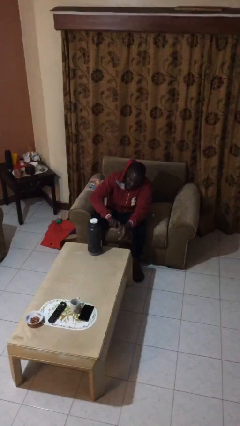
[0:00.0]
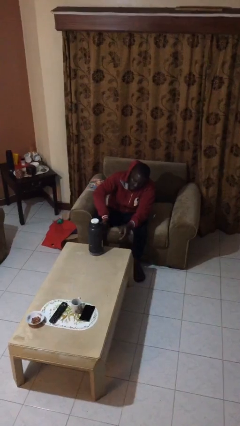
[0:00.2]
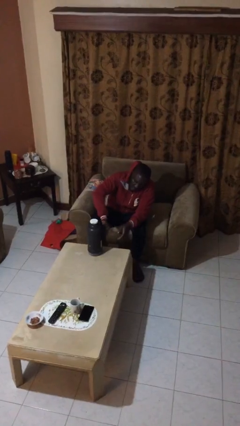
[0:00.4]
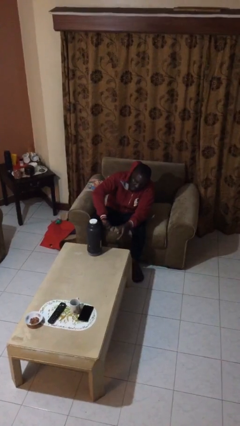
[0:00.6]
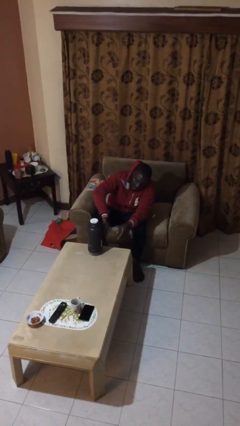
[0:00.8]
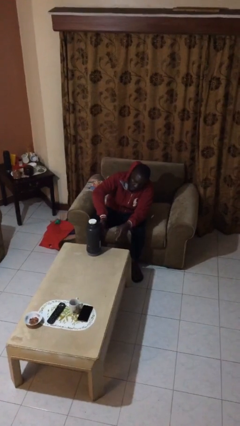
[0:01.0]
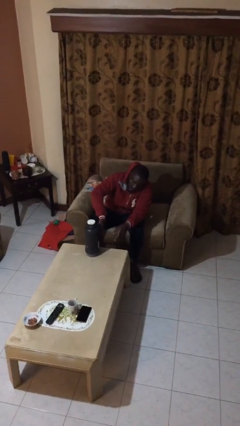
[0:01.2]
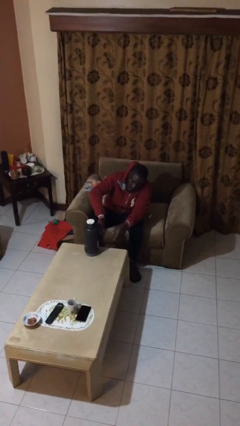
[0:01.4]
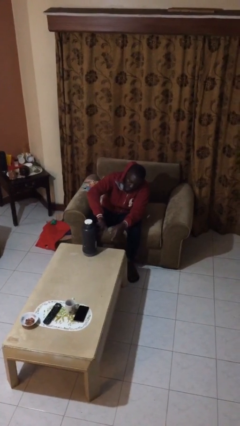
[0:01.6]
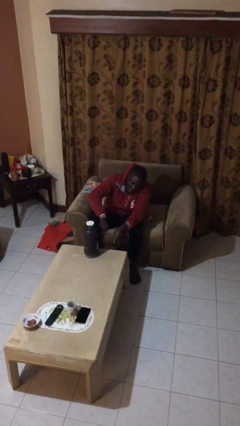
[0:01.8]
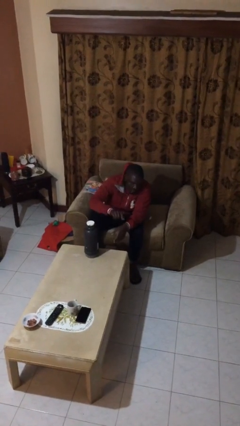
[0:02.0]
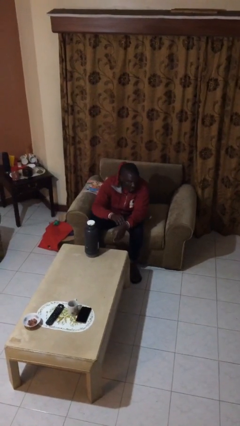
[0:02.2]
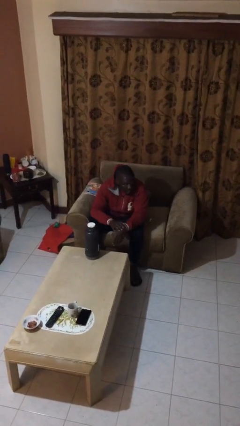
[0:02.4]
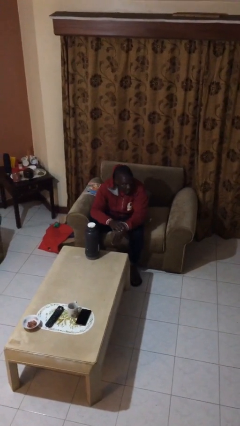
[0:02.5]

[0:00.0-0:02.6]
person taps object with finger

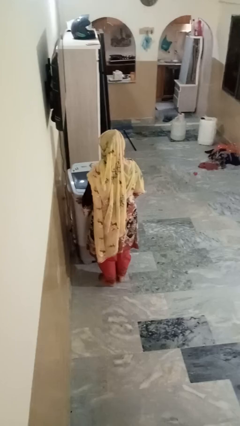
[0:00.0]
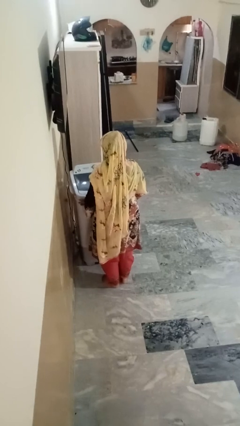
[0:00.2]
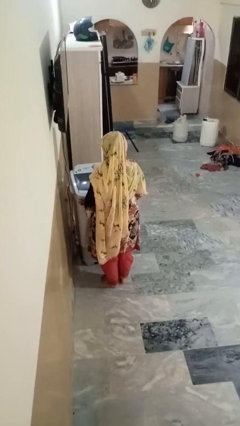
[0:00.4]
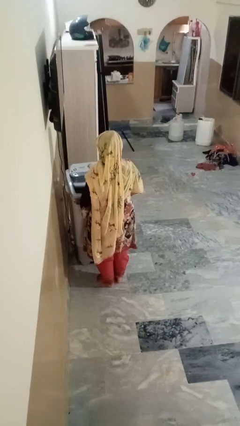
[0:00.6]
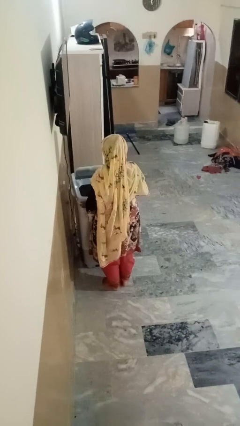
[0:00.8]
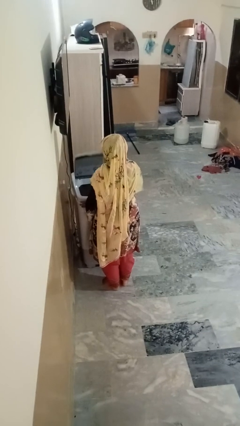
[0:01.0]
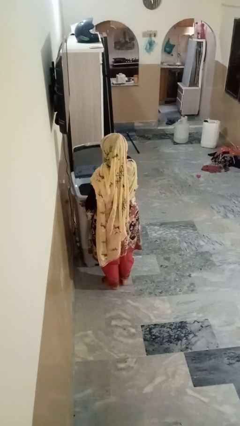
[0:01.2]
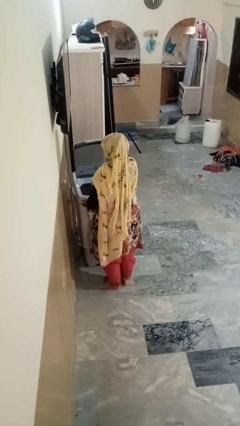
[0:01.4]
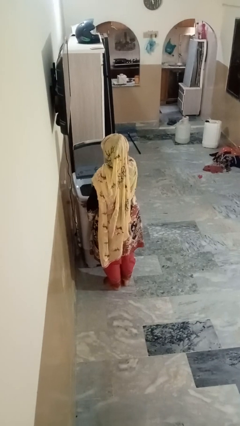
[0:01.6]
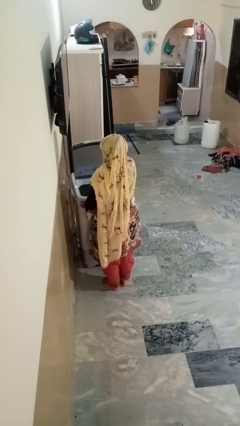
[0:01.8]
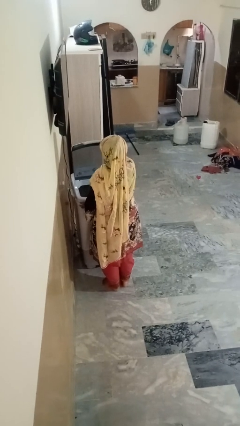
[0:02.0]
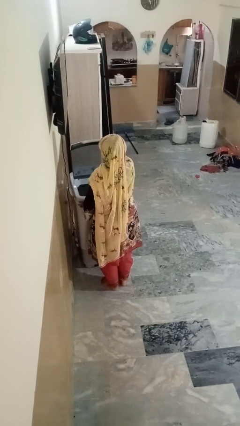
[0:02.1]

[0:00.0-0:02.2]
person opens clothes washer

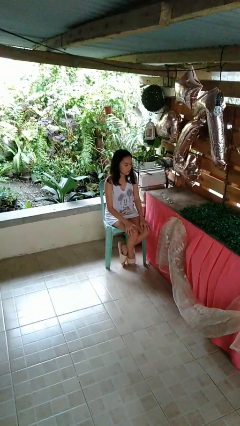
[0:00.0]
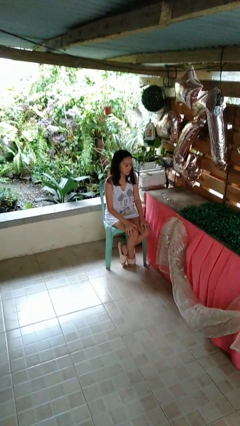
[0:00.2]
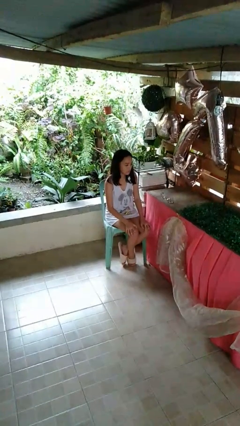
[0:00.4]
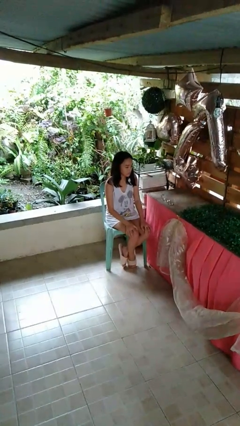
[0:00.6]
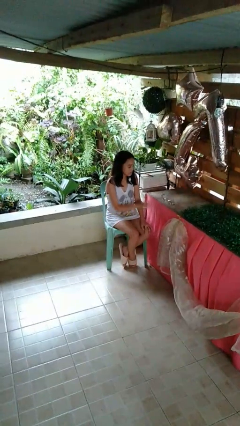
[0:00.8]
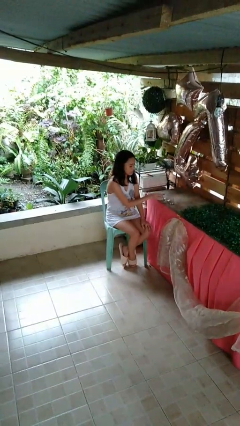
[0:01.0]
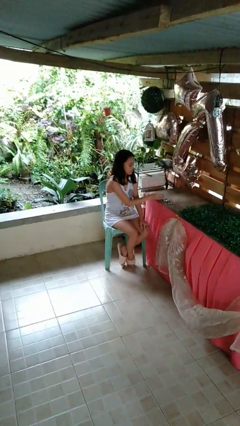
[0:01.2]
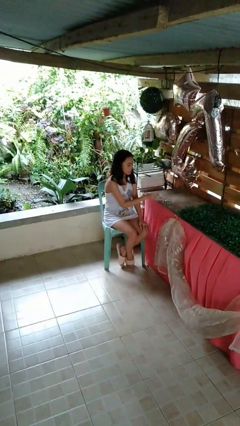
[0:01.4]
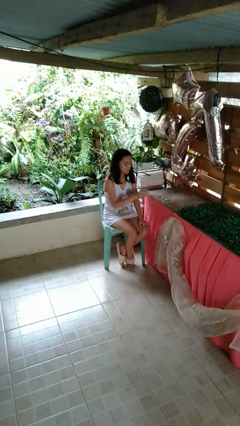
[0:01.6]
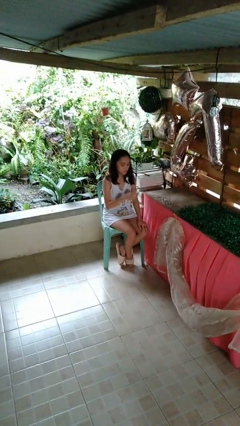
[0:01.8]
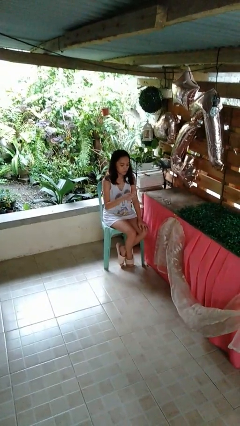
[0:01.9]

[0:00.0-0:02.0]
person picks up object from table

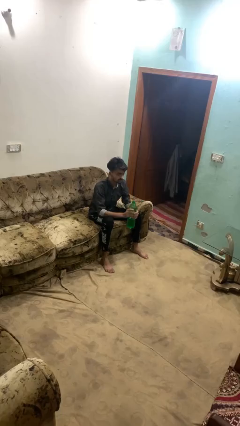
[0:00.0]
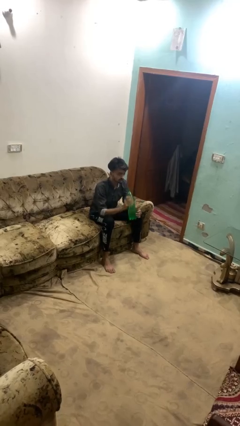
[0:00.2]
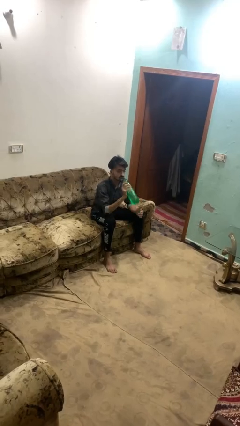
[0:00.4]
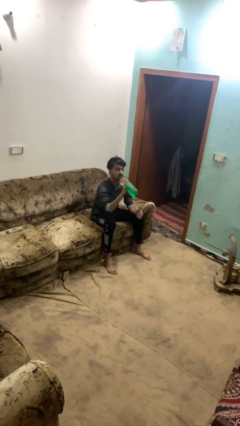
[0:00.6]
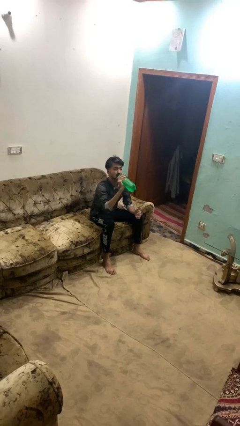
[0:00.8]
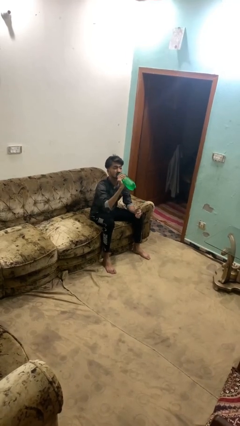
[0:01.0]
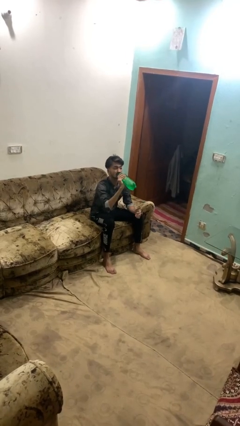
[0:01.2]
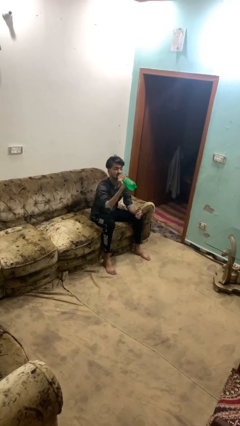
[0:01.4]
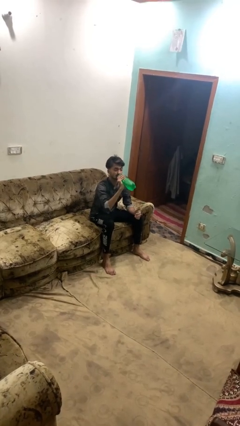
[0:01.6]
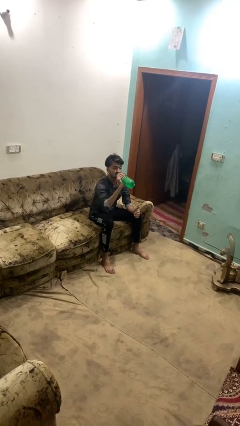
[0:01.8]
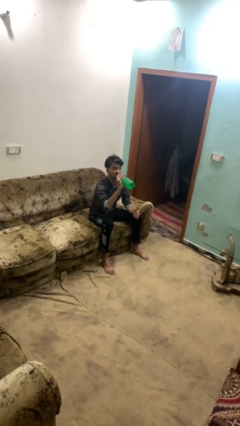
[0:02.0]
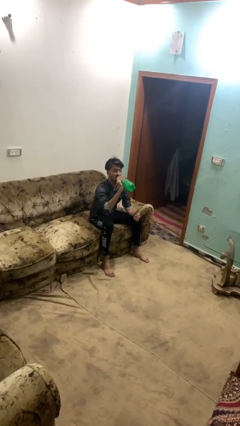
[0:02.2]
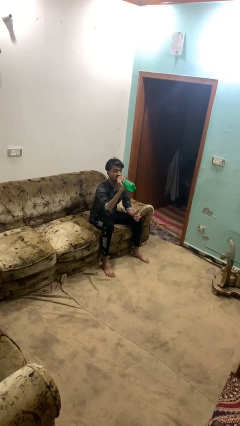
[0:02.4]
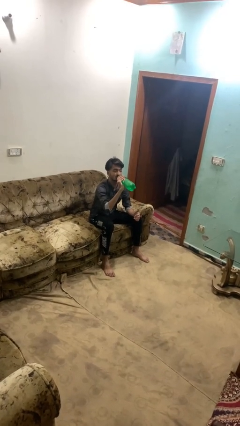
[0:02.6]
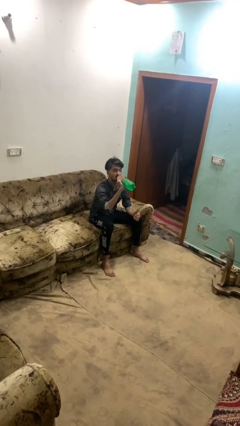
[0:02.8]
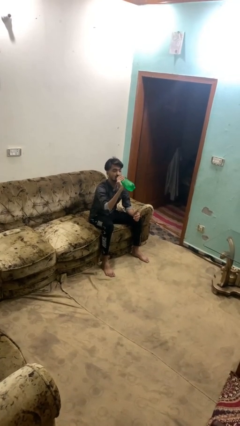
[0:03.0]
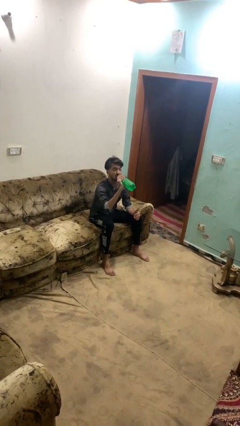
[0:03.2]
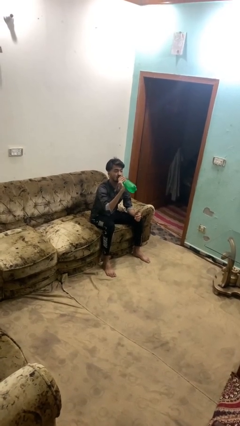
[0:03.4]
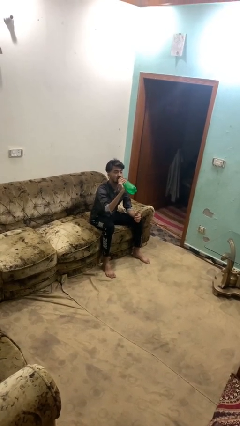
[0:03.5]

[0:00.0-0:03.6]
person drinks from bottle

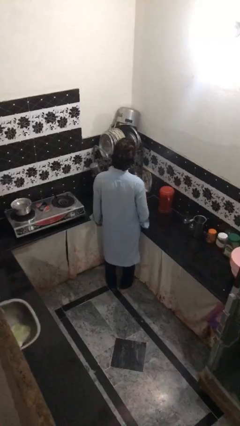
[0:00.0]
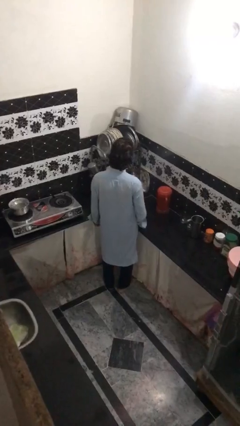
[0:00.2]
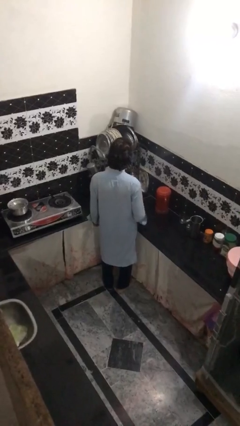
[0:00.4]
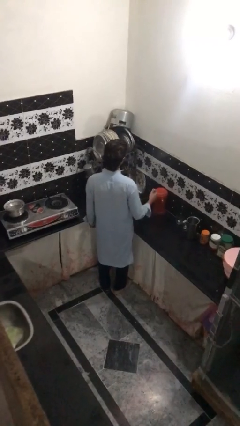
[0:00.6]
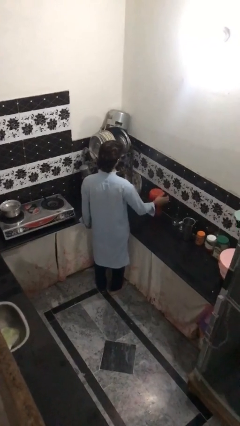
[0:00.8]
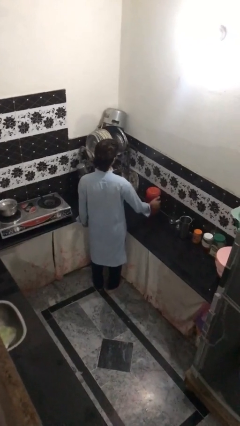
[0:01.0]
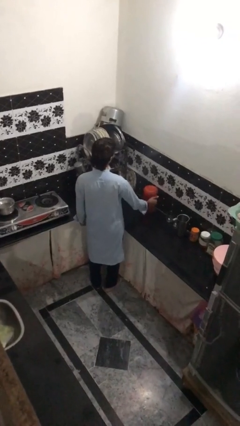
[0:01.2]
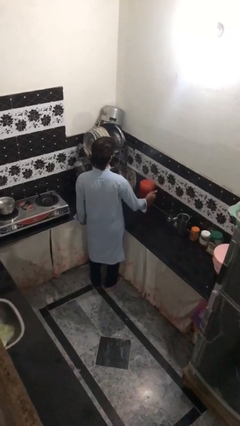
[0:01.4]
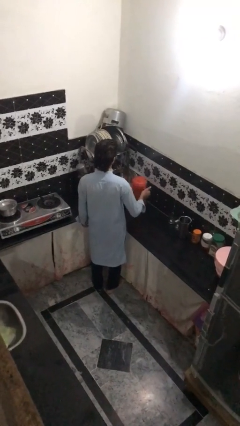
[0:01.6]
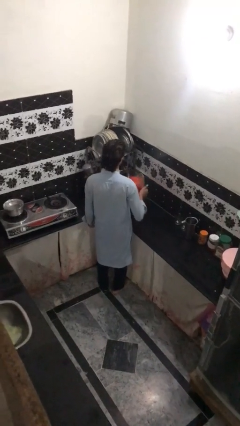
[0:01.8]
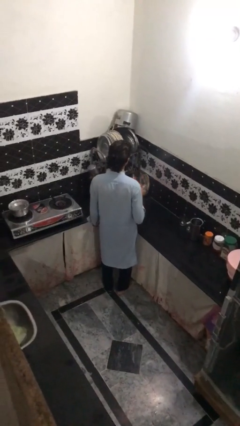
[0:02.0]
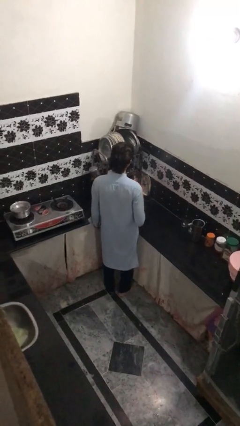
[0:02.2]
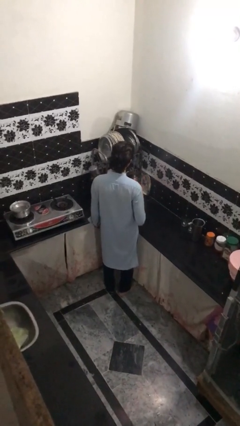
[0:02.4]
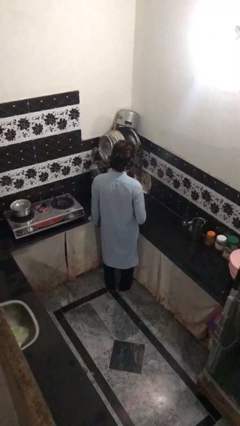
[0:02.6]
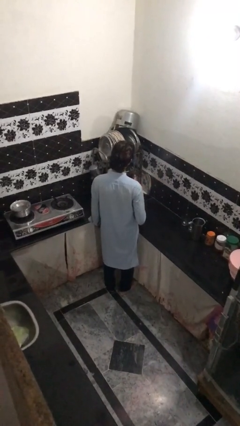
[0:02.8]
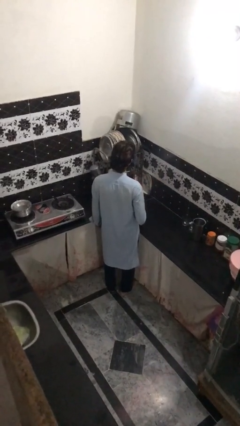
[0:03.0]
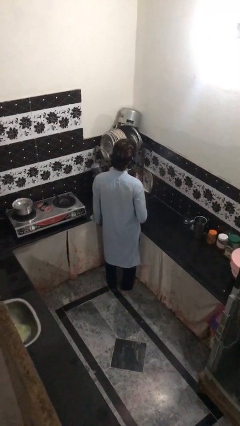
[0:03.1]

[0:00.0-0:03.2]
person picks up object from countertop

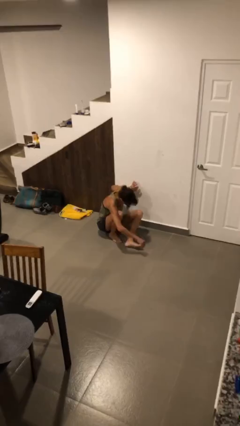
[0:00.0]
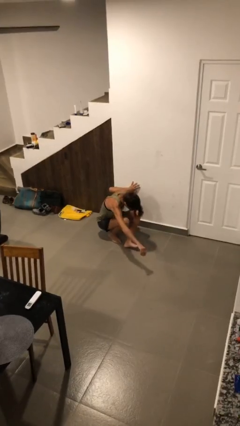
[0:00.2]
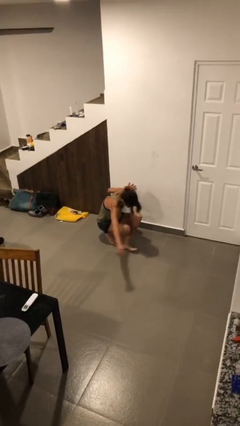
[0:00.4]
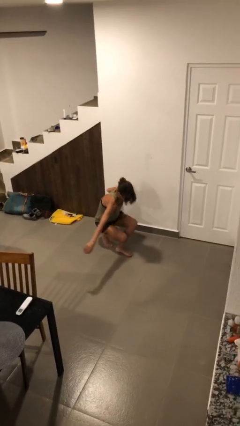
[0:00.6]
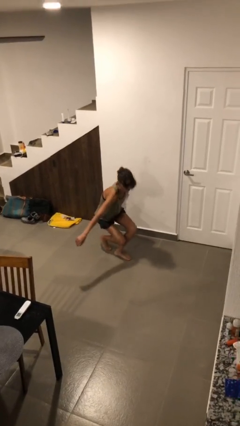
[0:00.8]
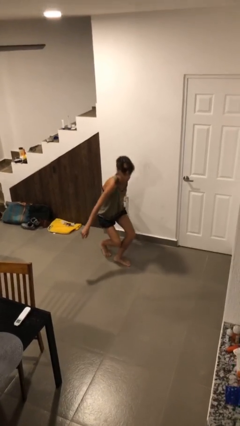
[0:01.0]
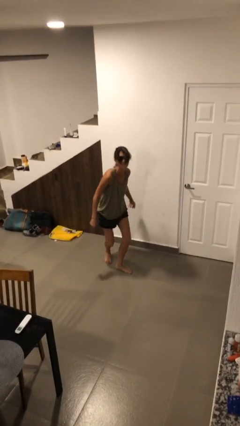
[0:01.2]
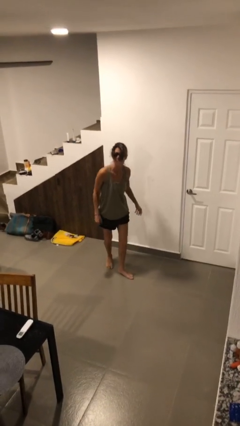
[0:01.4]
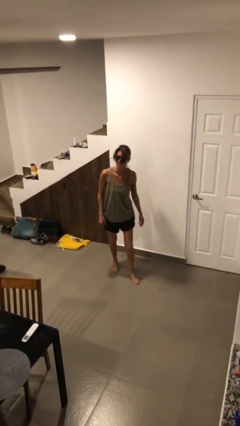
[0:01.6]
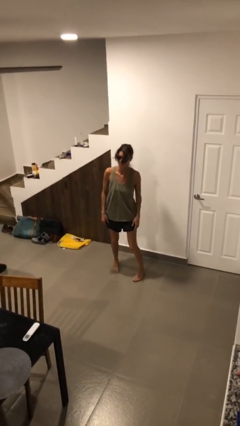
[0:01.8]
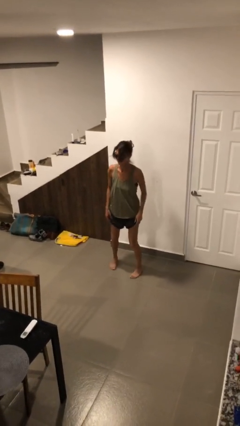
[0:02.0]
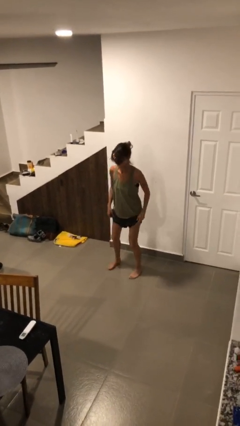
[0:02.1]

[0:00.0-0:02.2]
person stands up

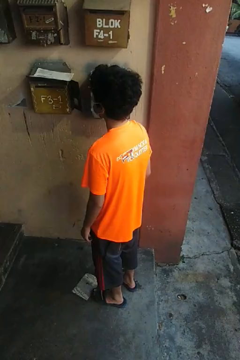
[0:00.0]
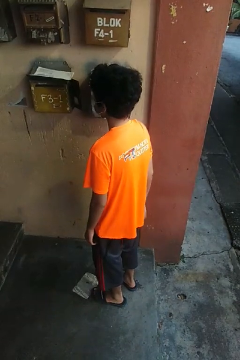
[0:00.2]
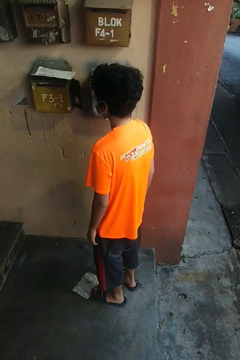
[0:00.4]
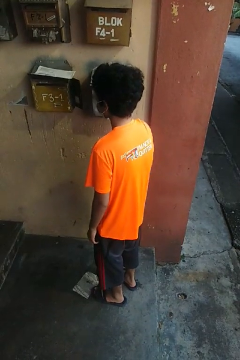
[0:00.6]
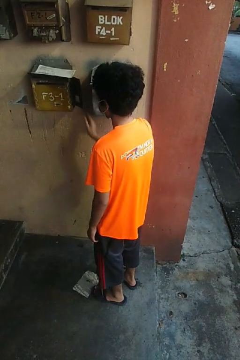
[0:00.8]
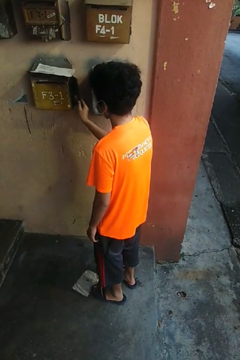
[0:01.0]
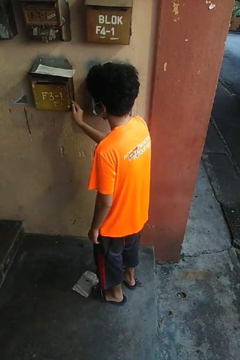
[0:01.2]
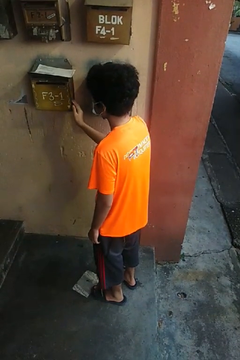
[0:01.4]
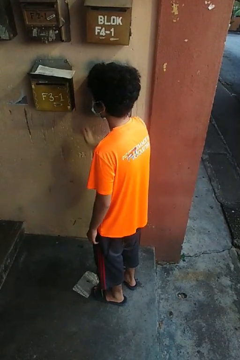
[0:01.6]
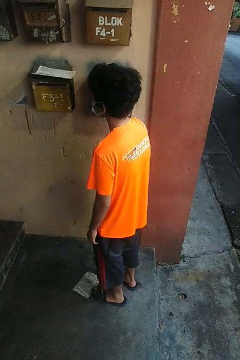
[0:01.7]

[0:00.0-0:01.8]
person closes mailbox
